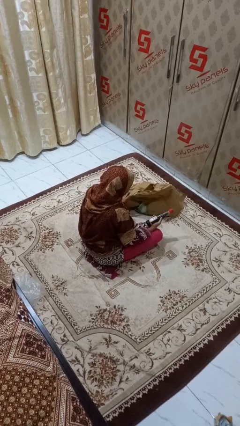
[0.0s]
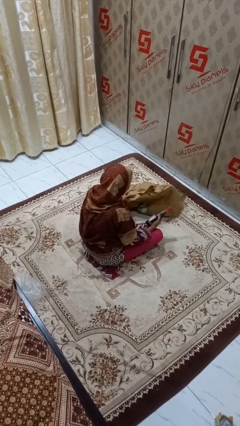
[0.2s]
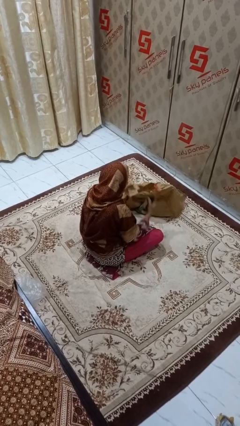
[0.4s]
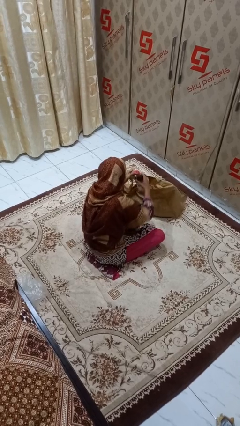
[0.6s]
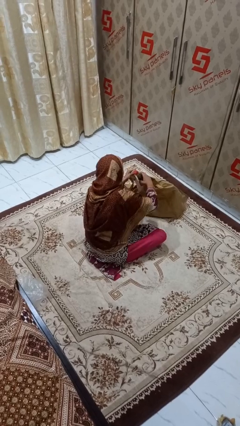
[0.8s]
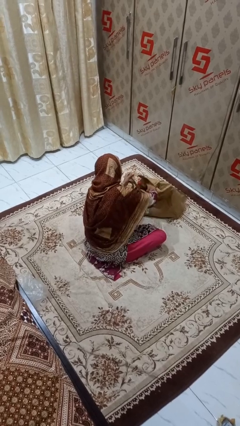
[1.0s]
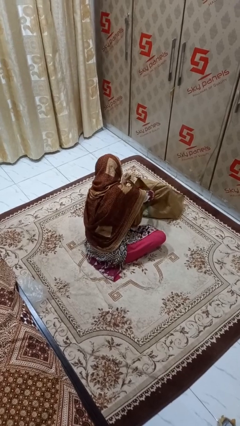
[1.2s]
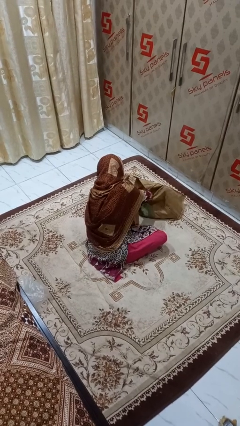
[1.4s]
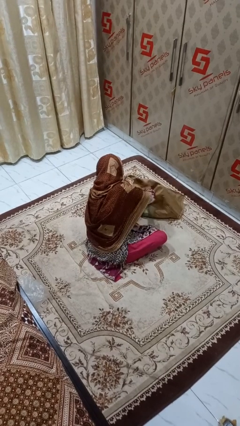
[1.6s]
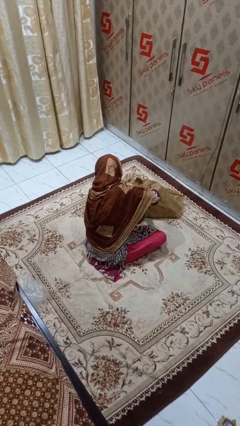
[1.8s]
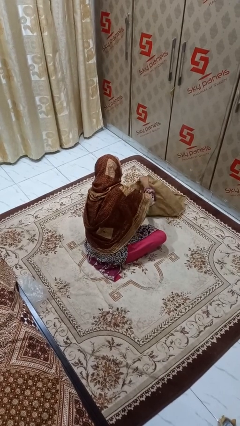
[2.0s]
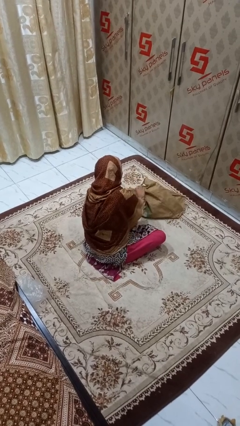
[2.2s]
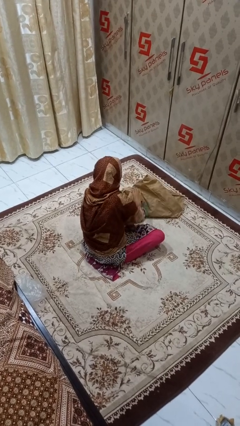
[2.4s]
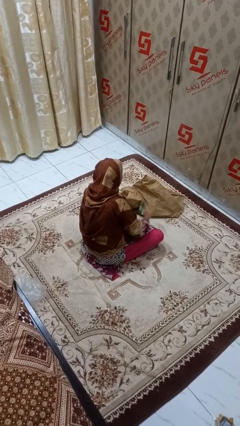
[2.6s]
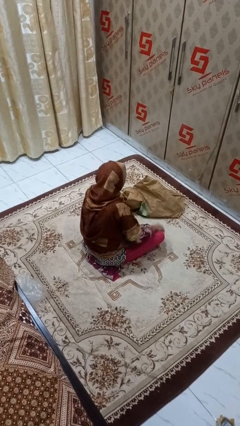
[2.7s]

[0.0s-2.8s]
person puts object into bag

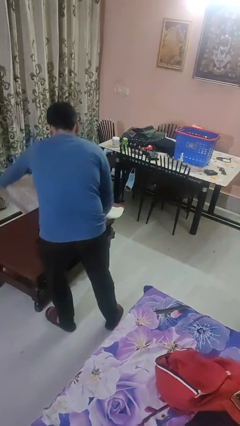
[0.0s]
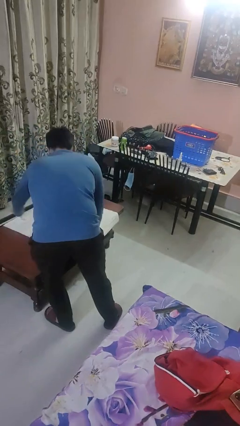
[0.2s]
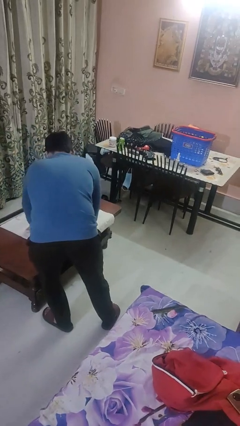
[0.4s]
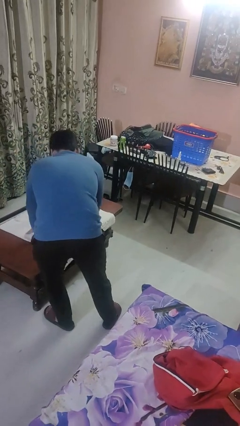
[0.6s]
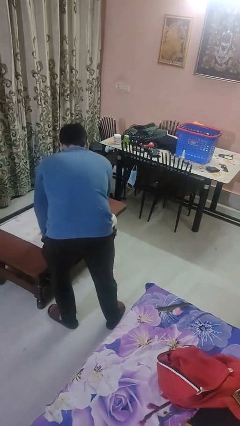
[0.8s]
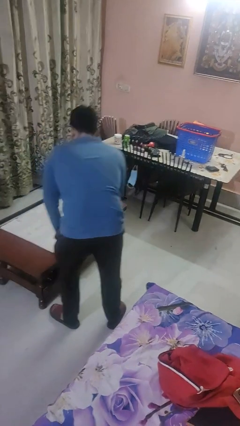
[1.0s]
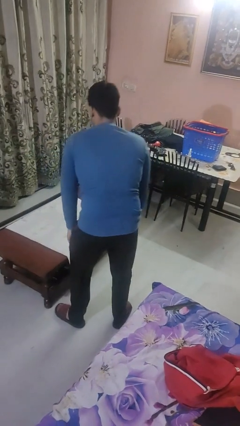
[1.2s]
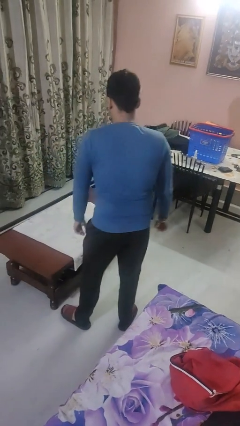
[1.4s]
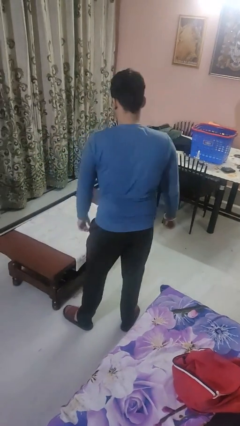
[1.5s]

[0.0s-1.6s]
person spreads tablecloth

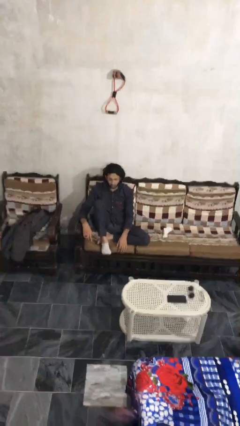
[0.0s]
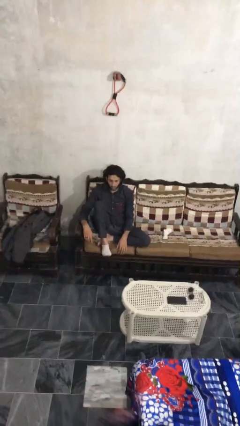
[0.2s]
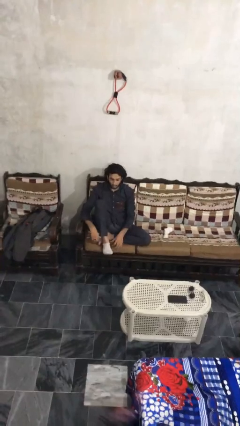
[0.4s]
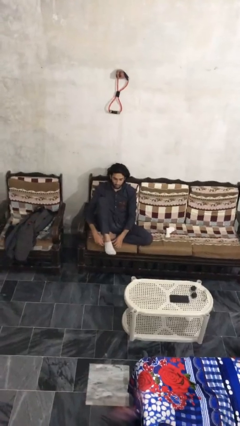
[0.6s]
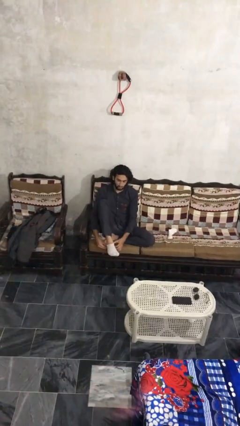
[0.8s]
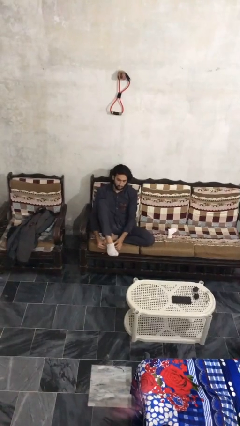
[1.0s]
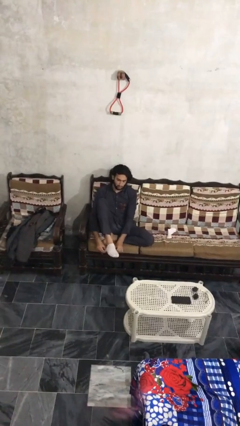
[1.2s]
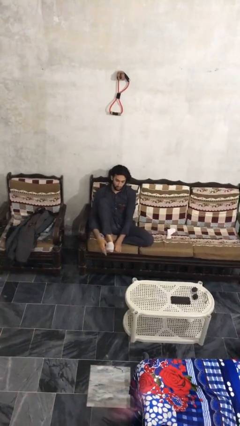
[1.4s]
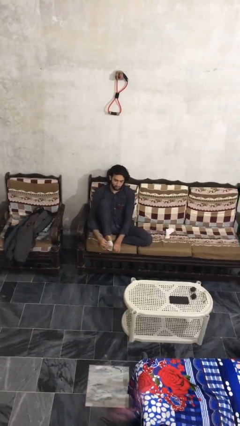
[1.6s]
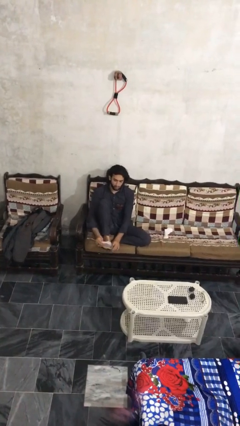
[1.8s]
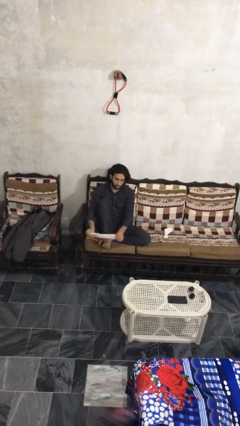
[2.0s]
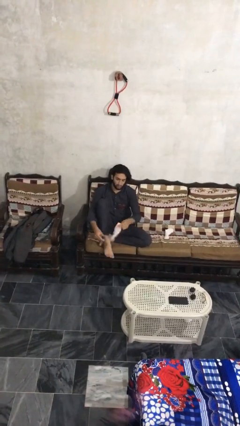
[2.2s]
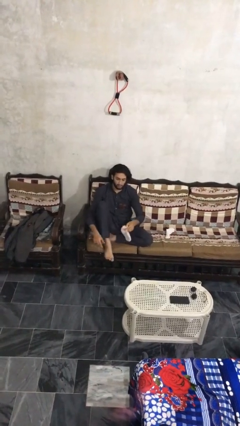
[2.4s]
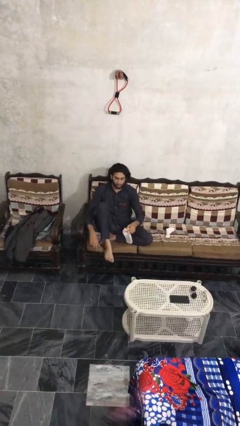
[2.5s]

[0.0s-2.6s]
person takes off socks

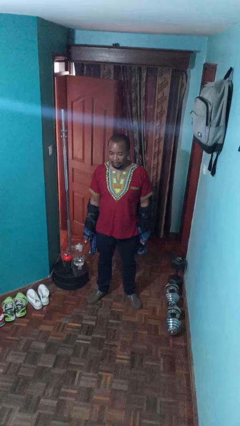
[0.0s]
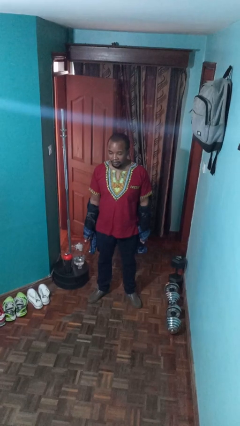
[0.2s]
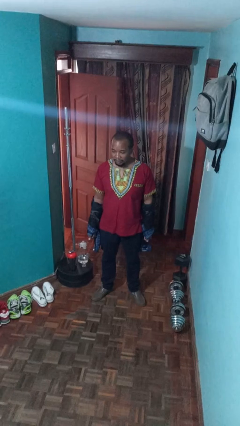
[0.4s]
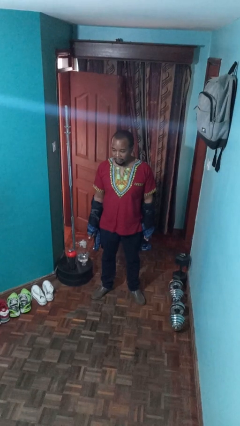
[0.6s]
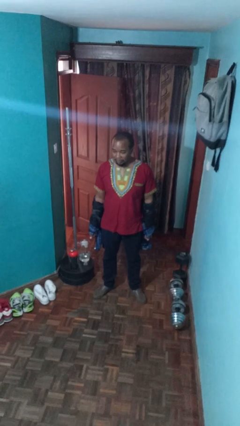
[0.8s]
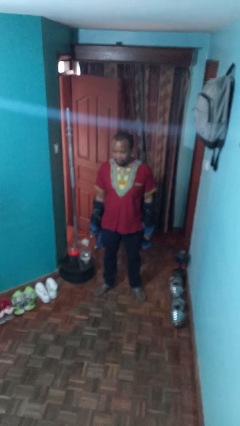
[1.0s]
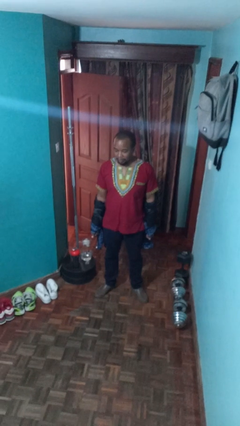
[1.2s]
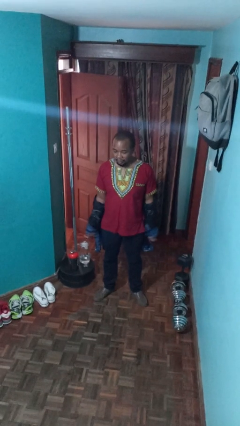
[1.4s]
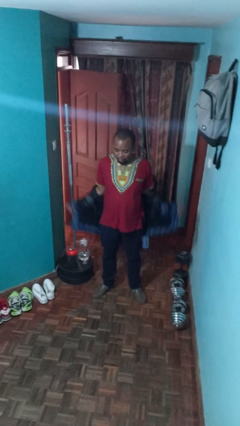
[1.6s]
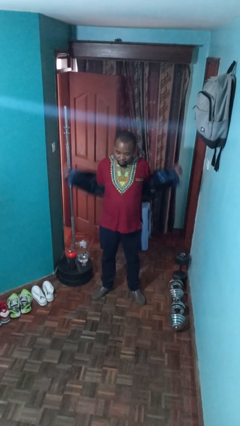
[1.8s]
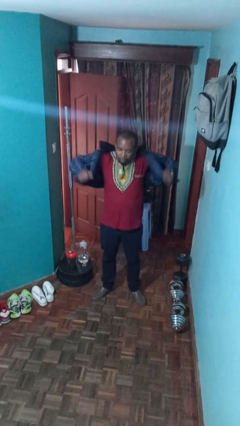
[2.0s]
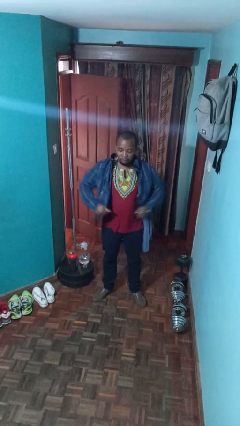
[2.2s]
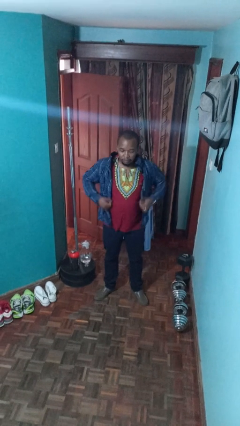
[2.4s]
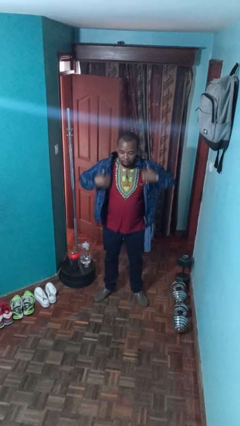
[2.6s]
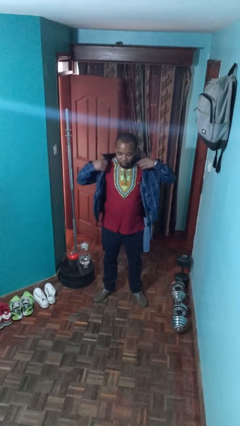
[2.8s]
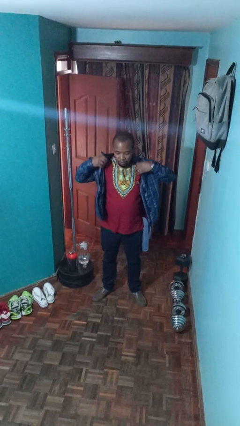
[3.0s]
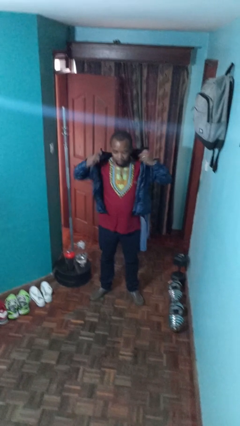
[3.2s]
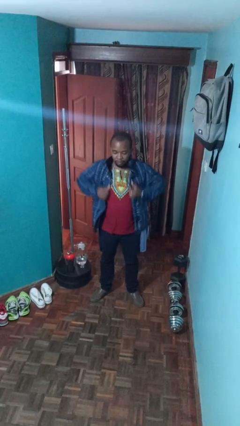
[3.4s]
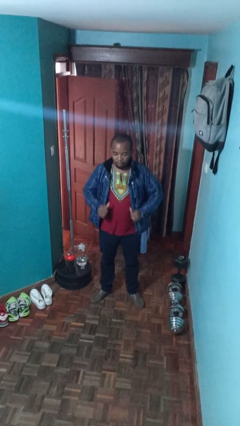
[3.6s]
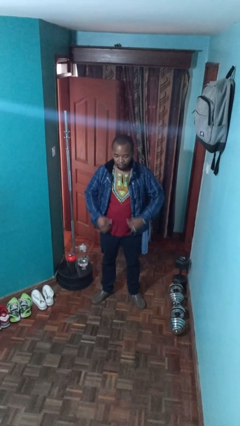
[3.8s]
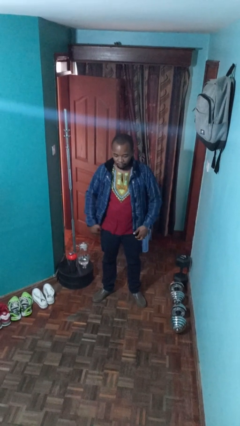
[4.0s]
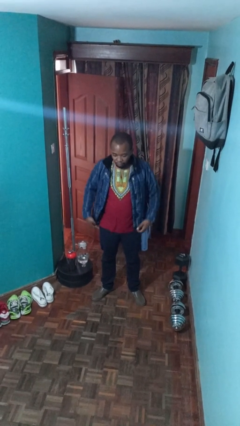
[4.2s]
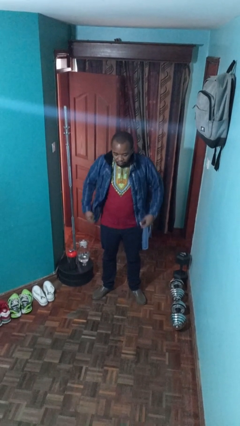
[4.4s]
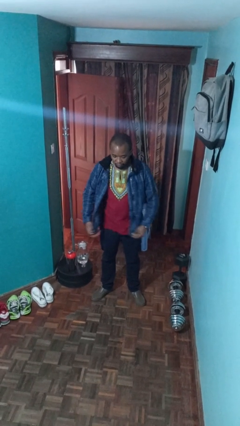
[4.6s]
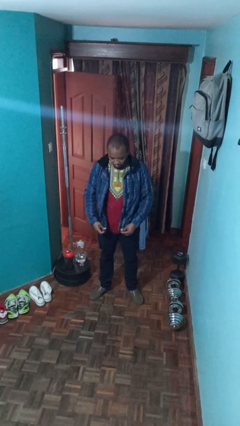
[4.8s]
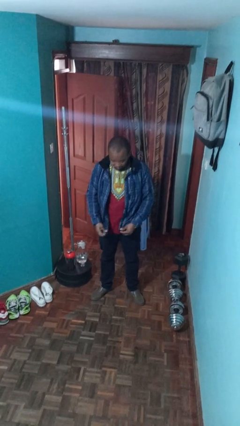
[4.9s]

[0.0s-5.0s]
person puts on jacket

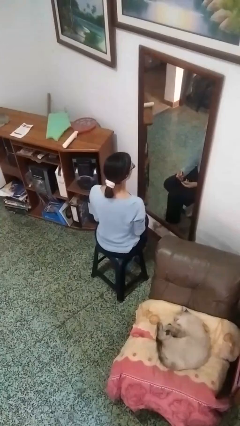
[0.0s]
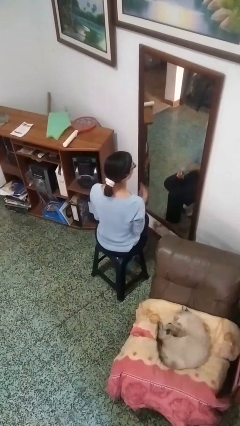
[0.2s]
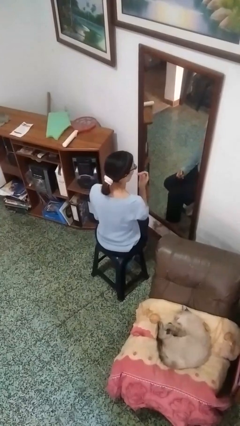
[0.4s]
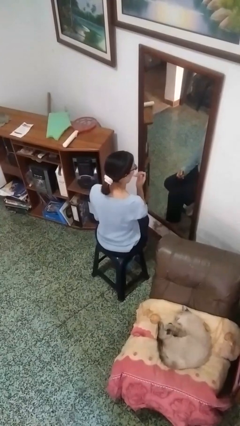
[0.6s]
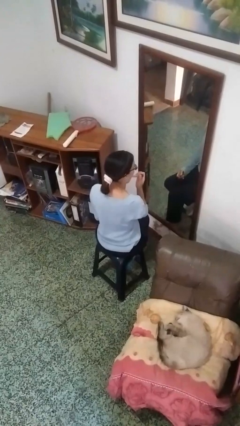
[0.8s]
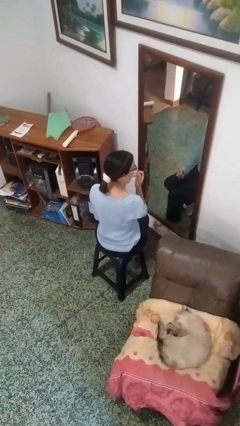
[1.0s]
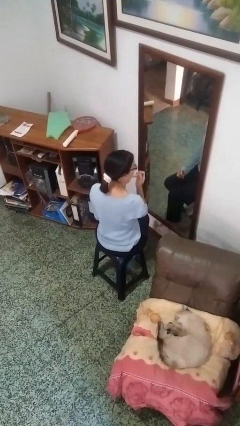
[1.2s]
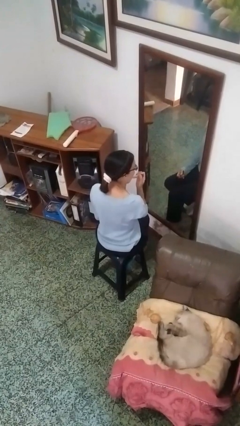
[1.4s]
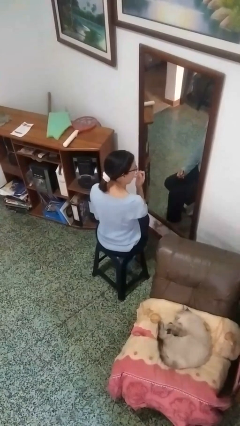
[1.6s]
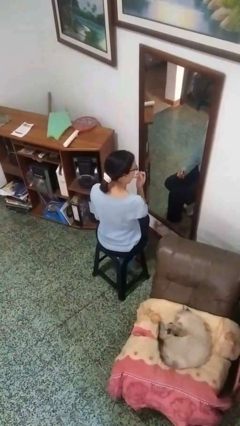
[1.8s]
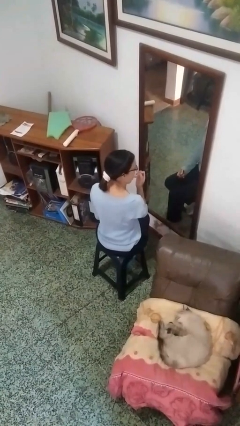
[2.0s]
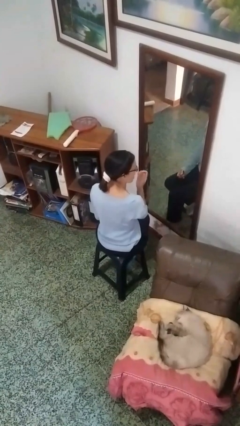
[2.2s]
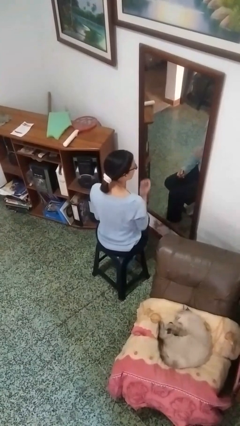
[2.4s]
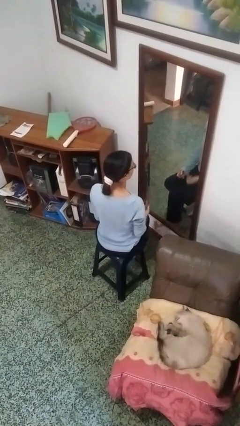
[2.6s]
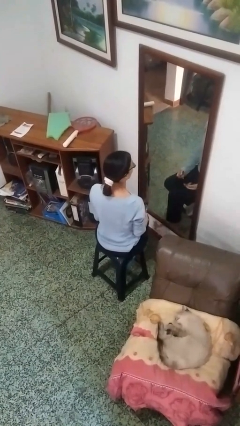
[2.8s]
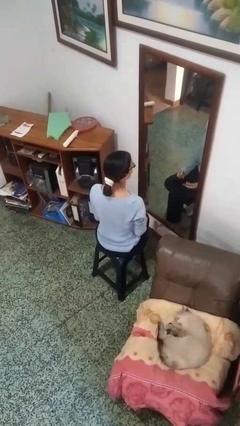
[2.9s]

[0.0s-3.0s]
person applies lip makeup

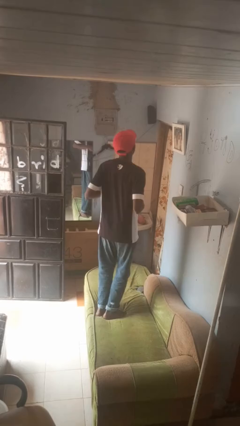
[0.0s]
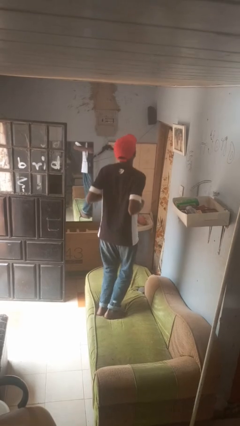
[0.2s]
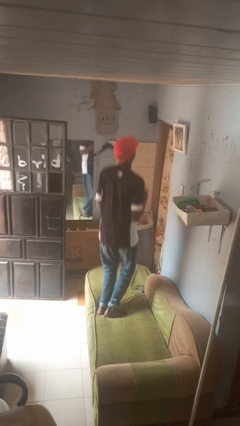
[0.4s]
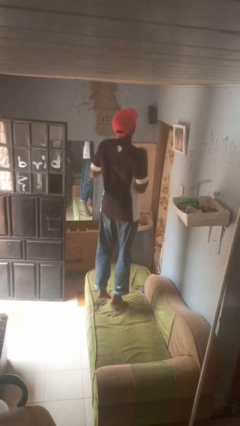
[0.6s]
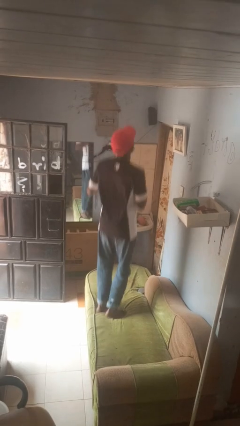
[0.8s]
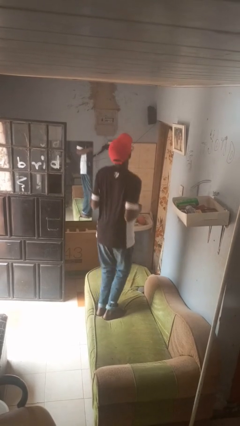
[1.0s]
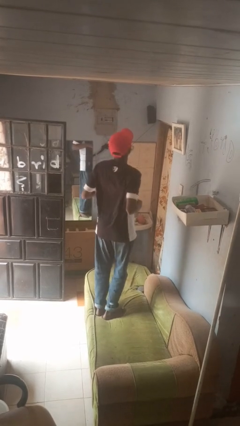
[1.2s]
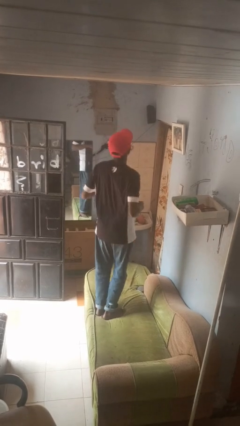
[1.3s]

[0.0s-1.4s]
person jumps on couch

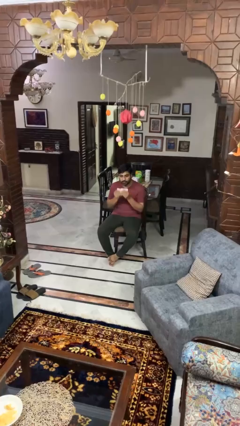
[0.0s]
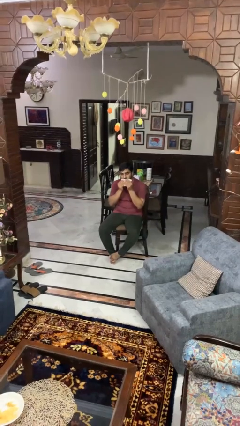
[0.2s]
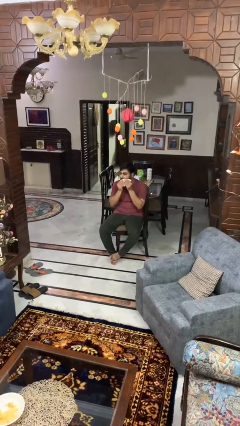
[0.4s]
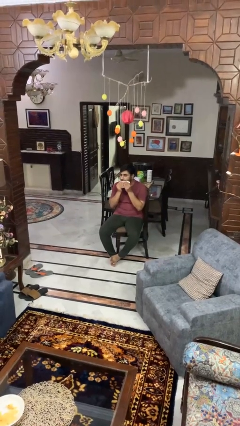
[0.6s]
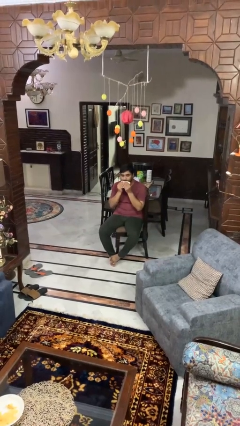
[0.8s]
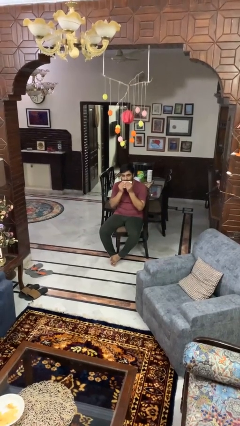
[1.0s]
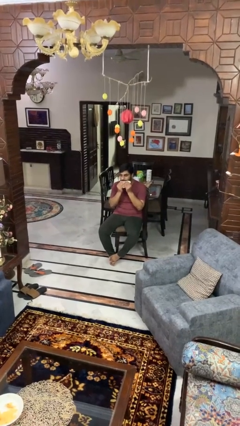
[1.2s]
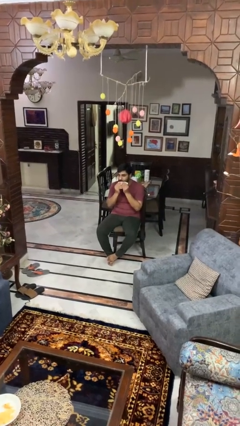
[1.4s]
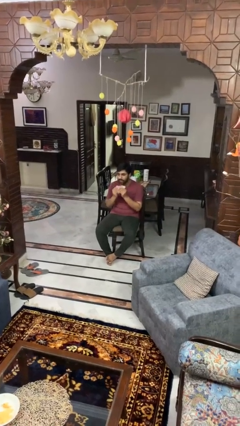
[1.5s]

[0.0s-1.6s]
person wipes mouth with napkin
